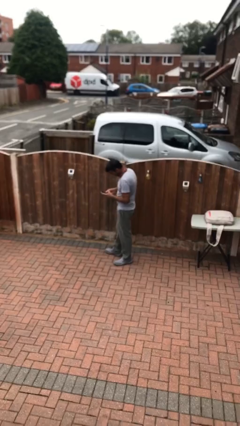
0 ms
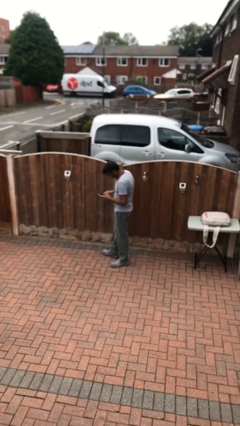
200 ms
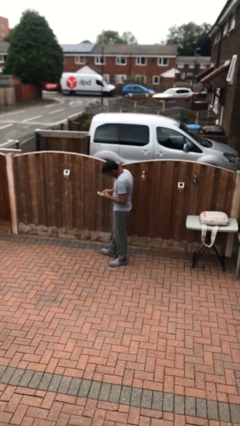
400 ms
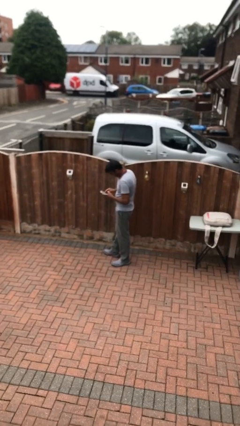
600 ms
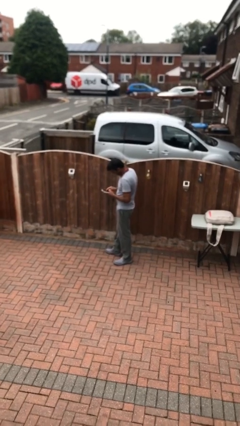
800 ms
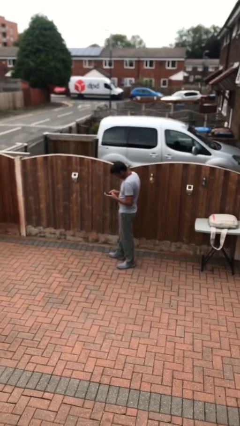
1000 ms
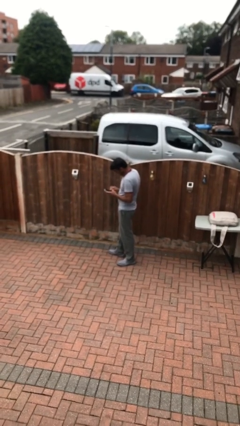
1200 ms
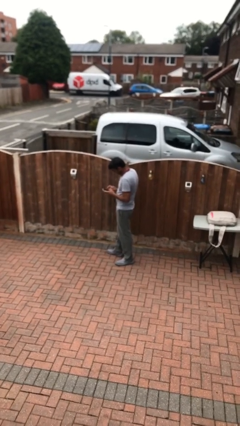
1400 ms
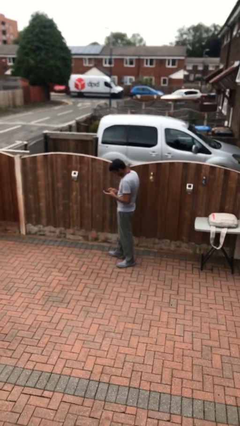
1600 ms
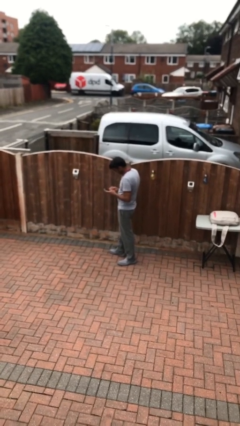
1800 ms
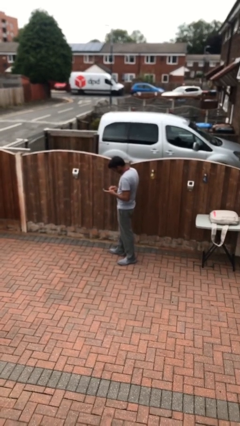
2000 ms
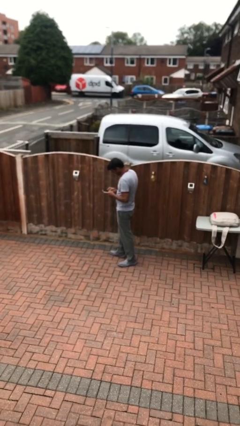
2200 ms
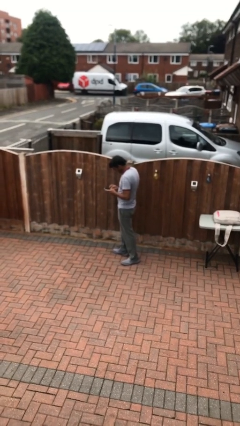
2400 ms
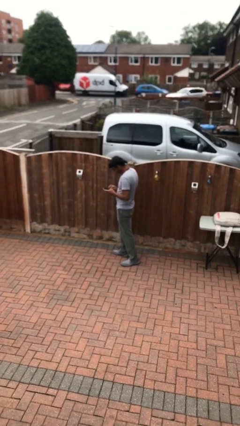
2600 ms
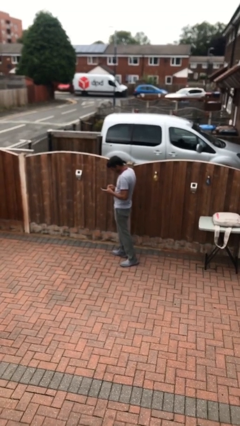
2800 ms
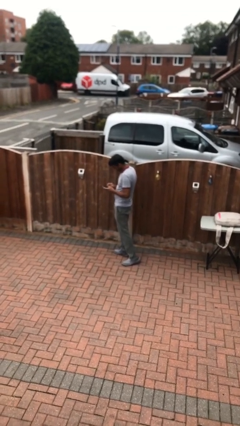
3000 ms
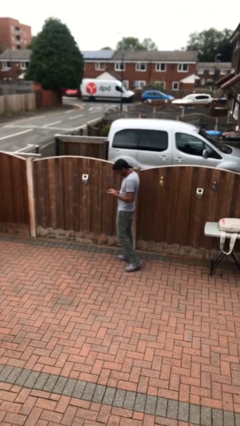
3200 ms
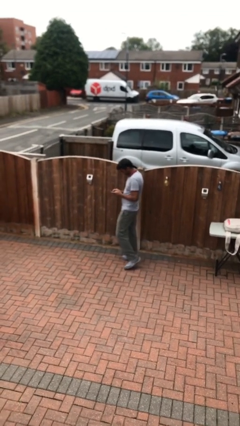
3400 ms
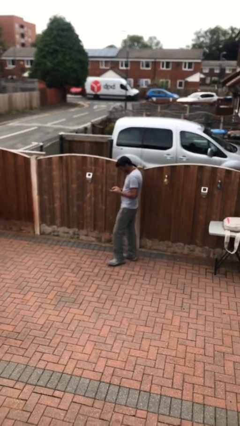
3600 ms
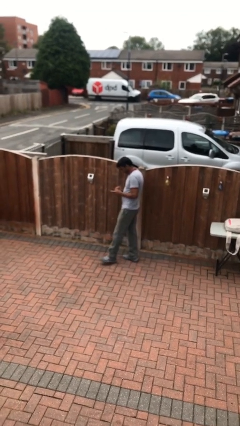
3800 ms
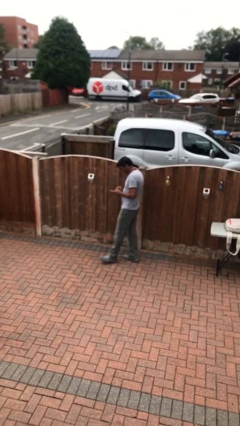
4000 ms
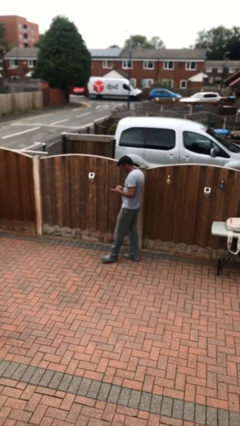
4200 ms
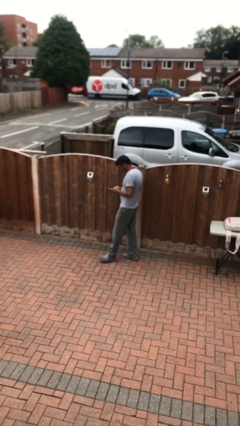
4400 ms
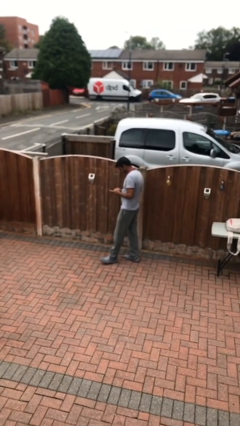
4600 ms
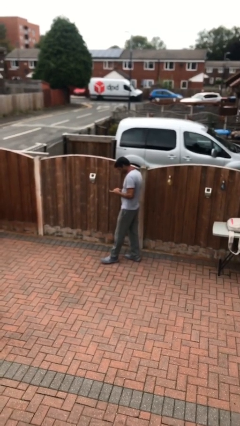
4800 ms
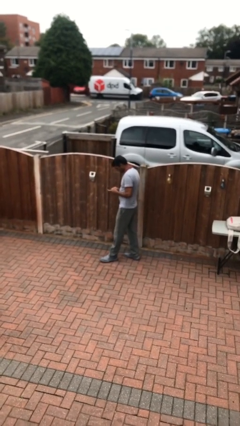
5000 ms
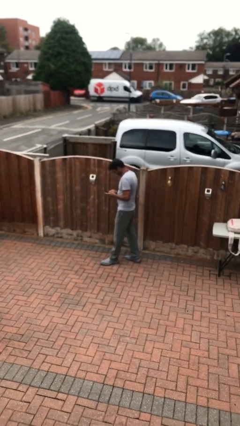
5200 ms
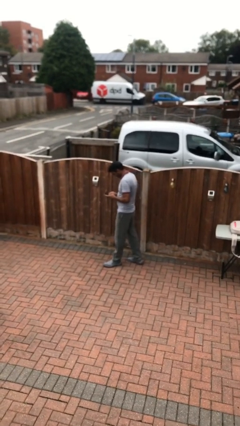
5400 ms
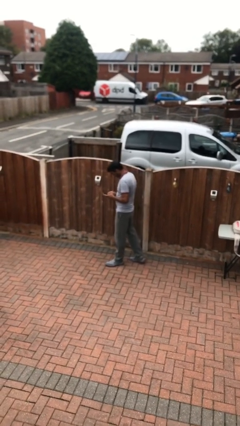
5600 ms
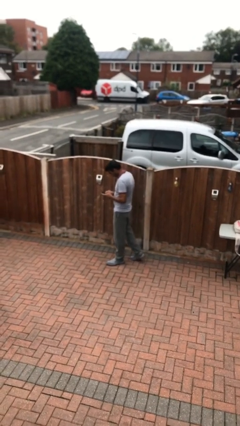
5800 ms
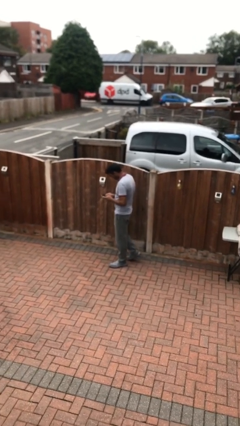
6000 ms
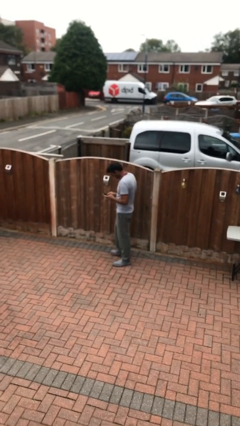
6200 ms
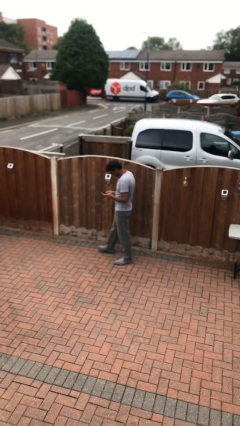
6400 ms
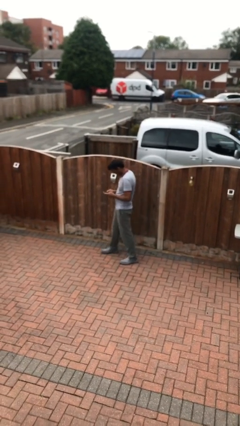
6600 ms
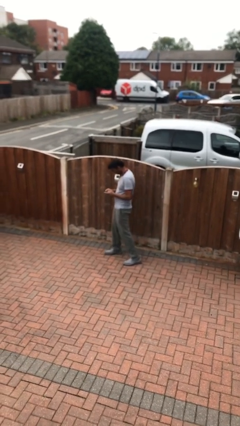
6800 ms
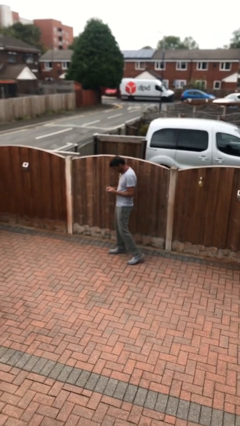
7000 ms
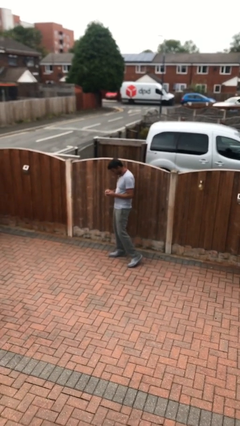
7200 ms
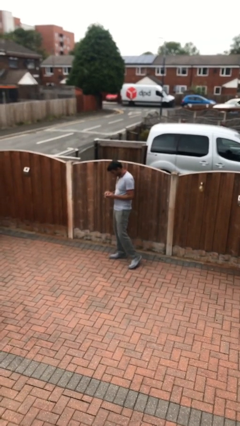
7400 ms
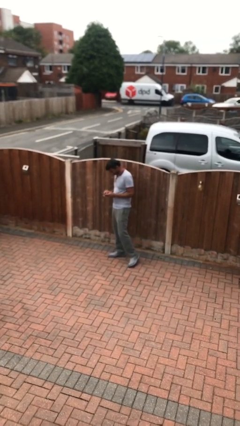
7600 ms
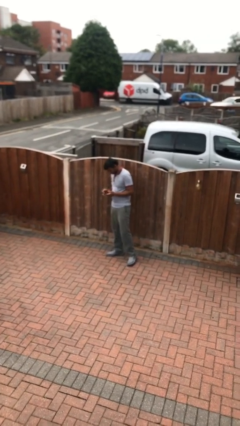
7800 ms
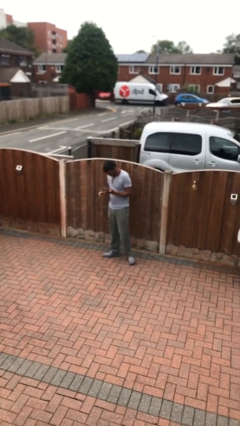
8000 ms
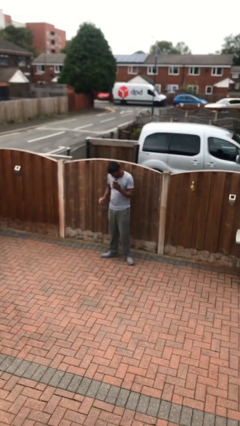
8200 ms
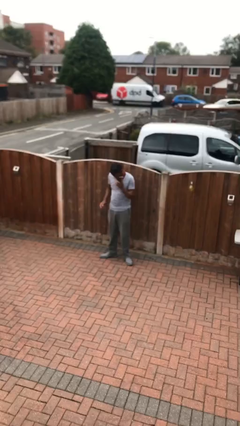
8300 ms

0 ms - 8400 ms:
person texts on phone

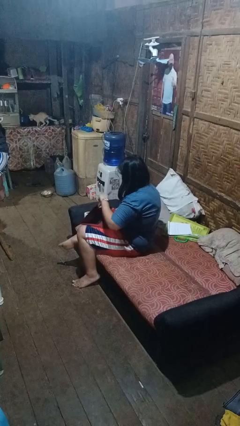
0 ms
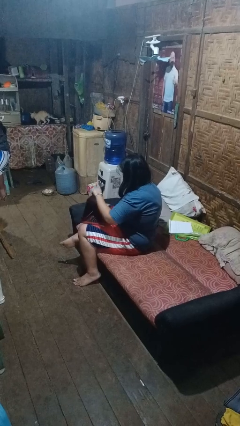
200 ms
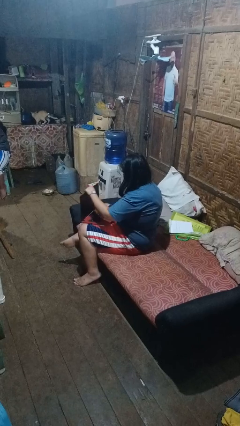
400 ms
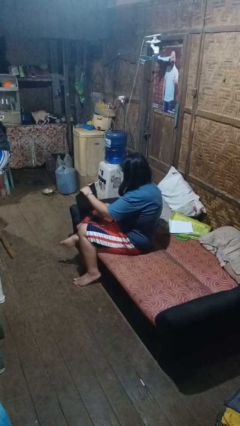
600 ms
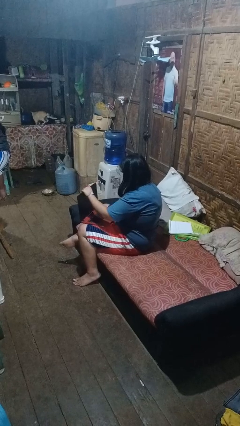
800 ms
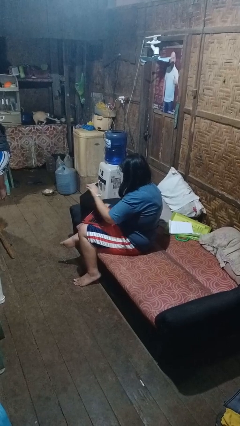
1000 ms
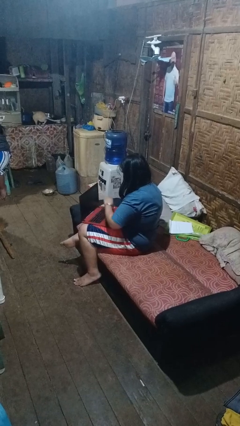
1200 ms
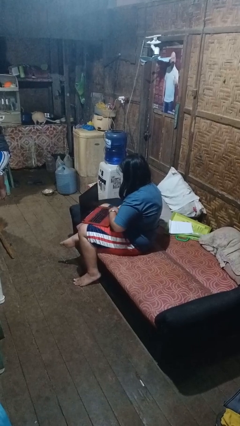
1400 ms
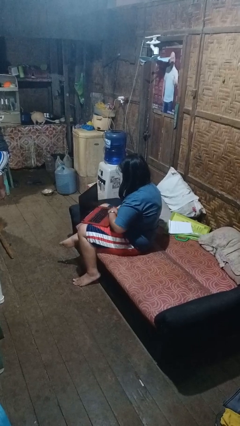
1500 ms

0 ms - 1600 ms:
person opens laptop

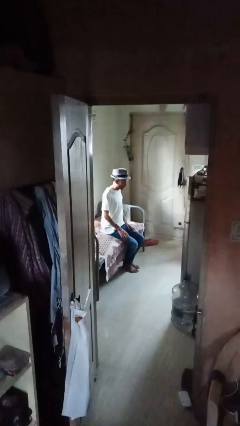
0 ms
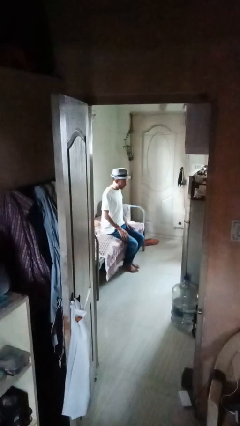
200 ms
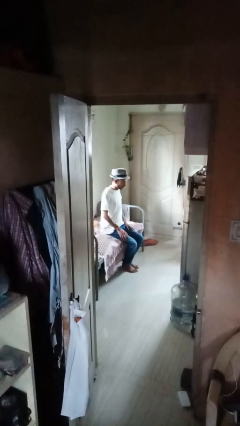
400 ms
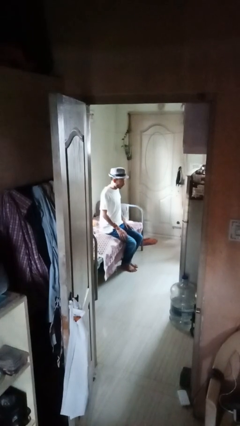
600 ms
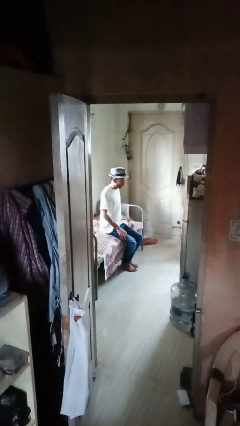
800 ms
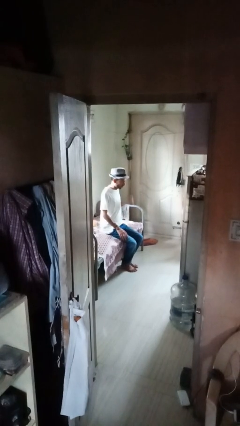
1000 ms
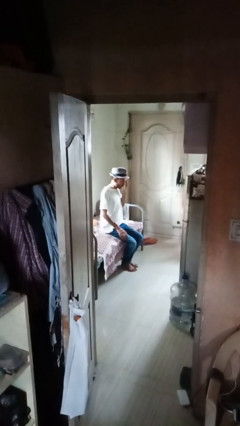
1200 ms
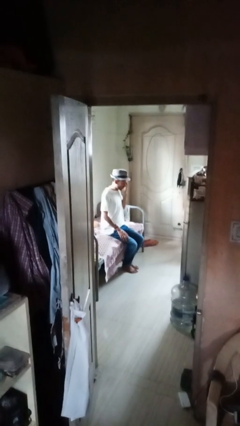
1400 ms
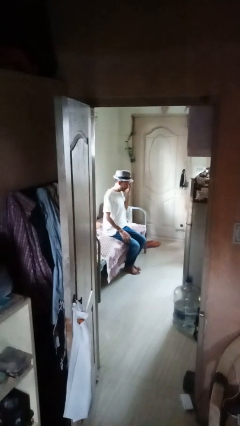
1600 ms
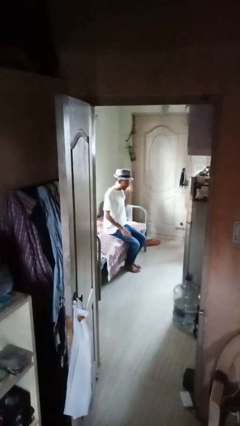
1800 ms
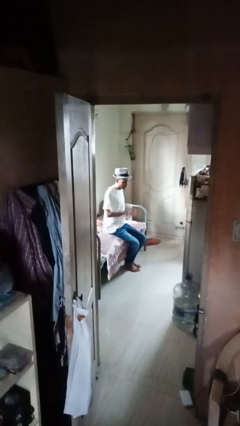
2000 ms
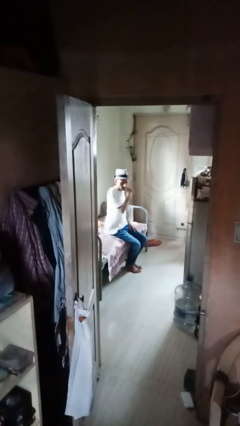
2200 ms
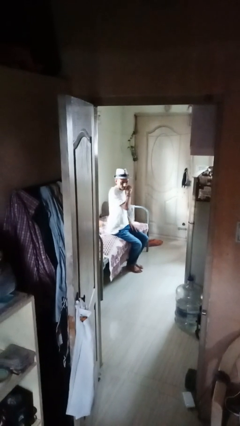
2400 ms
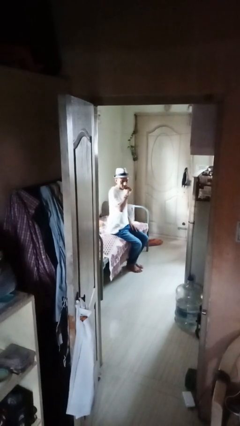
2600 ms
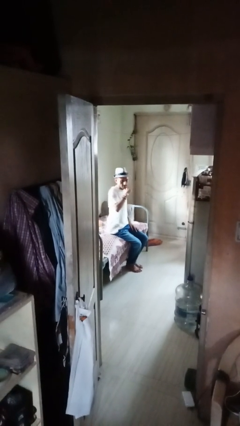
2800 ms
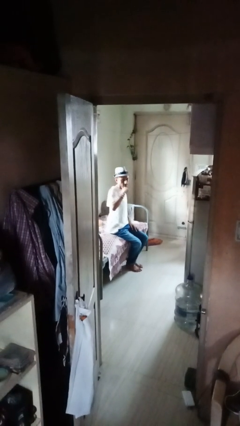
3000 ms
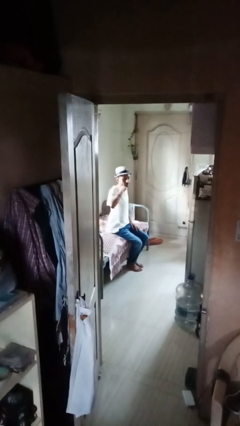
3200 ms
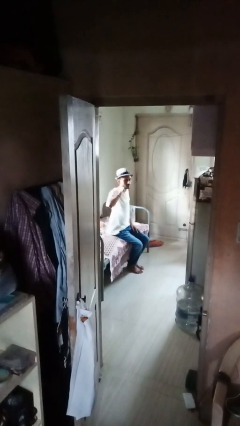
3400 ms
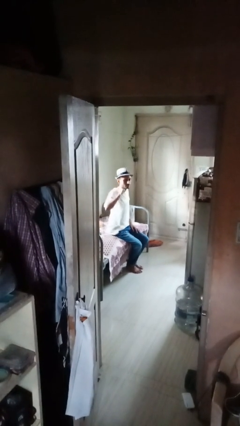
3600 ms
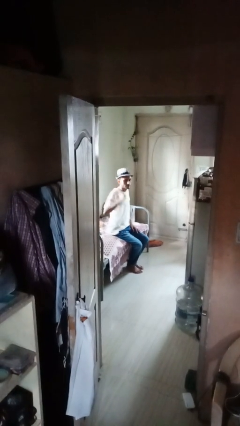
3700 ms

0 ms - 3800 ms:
person gestures cut

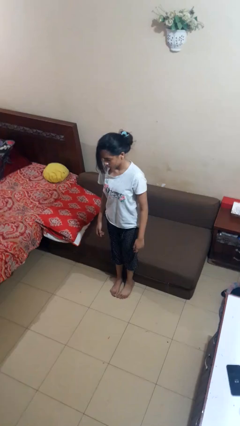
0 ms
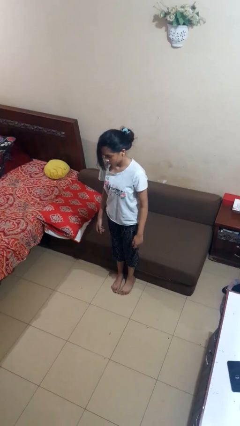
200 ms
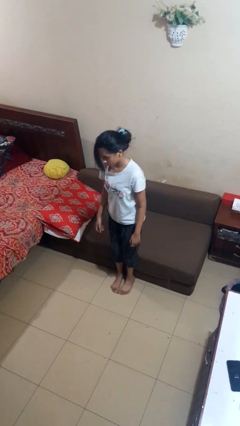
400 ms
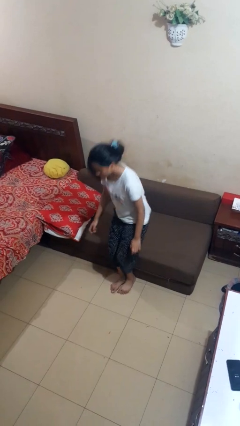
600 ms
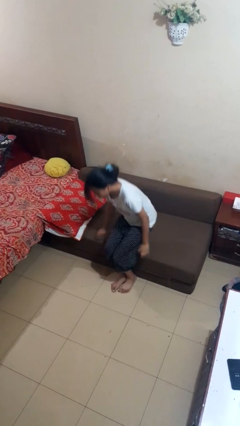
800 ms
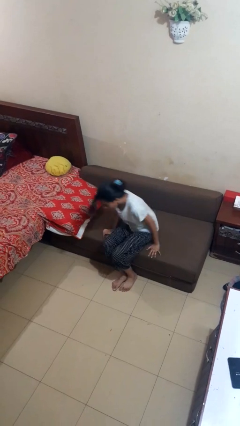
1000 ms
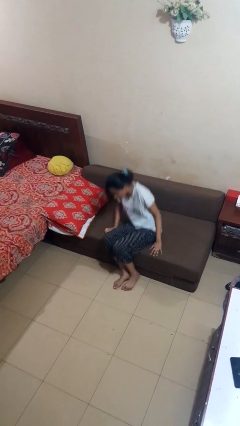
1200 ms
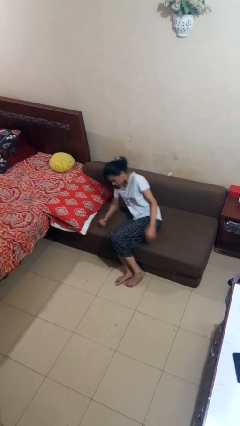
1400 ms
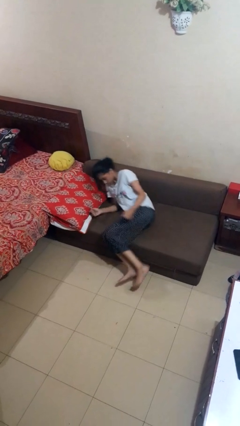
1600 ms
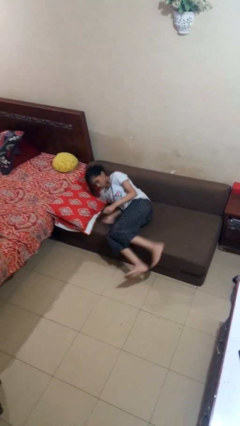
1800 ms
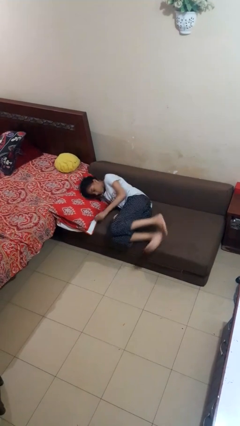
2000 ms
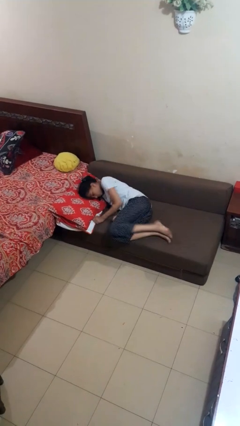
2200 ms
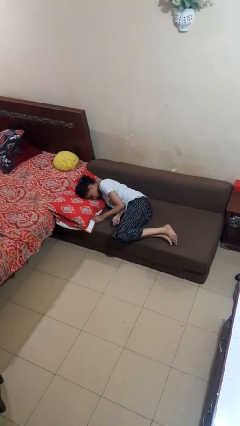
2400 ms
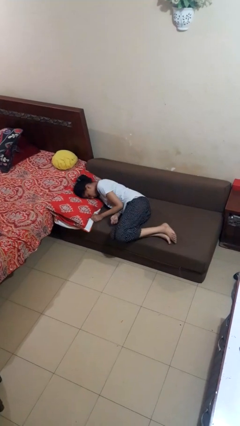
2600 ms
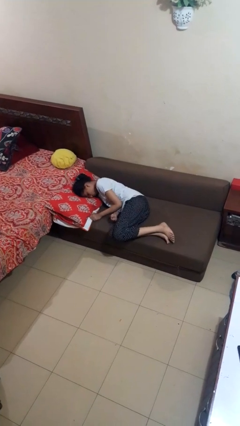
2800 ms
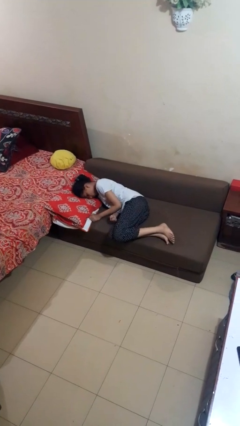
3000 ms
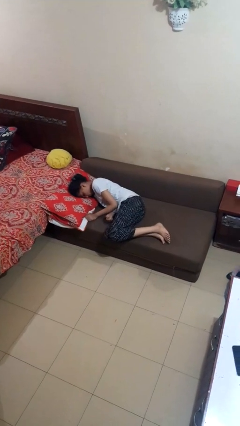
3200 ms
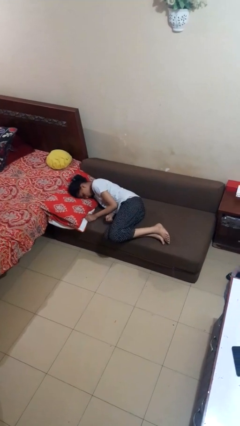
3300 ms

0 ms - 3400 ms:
person lies down on couch

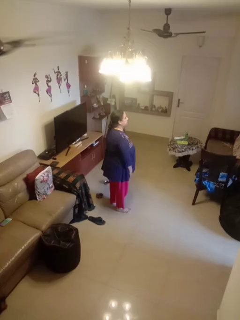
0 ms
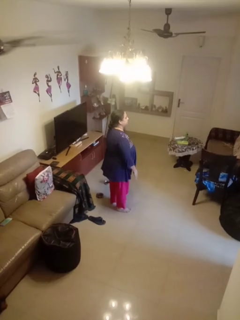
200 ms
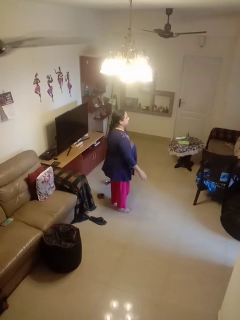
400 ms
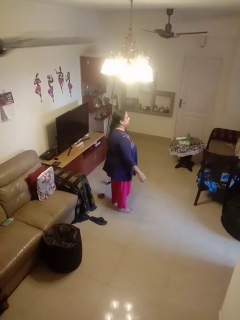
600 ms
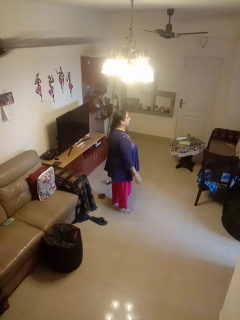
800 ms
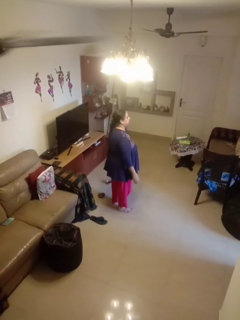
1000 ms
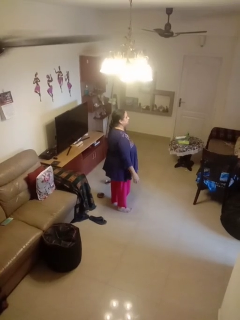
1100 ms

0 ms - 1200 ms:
person slaps hands on thighs
